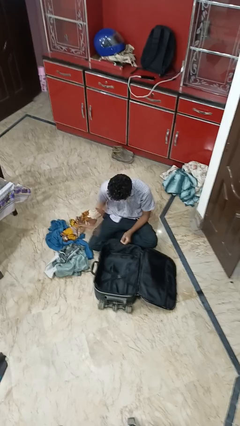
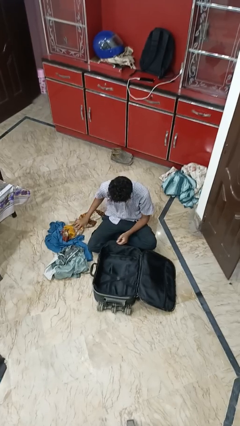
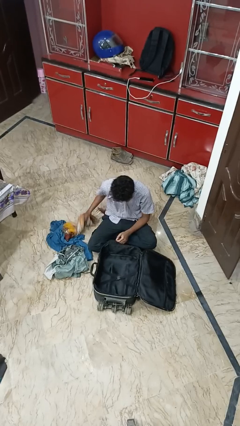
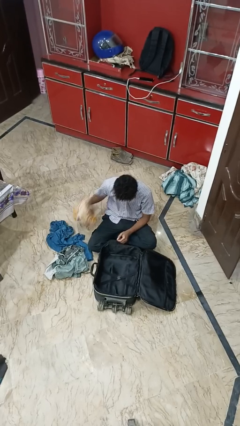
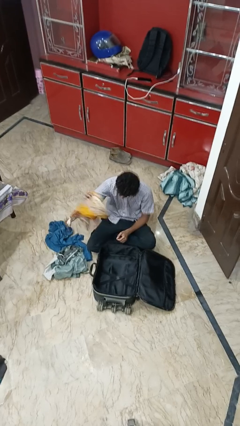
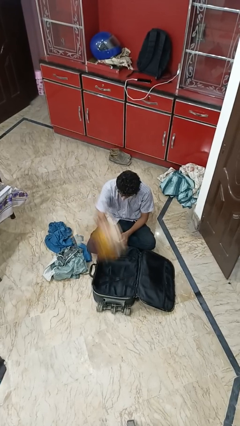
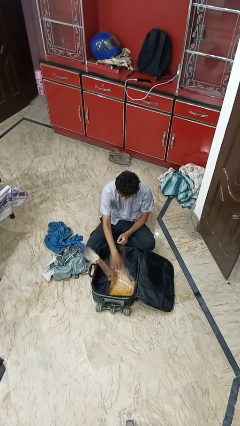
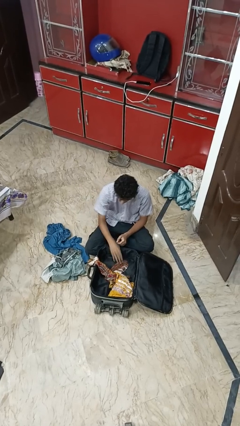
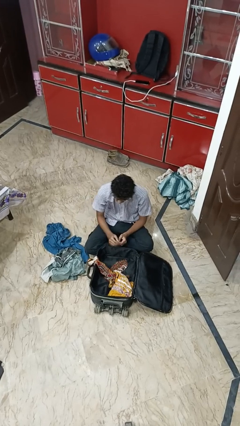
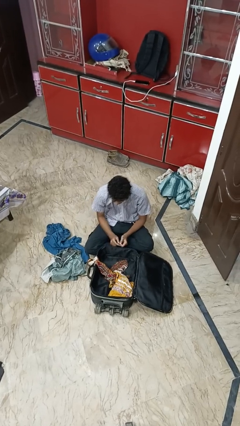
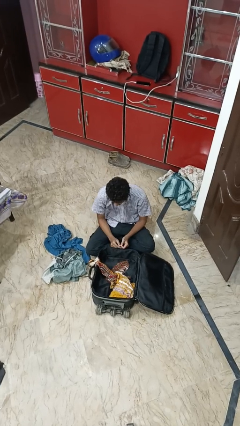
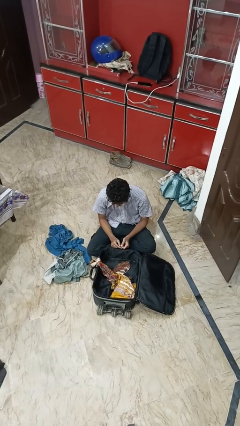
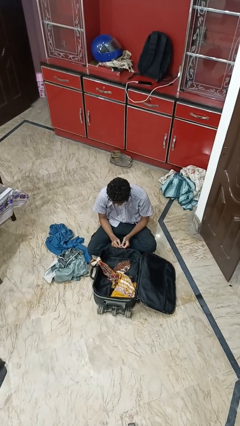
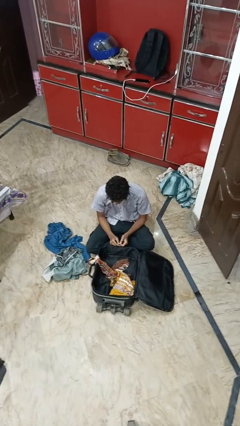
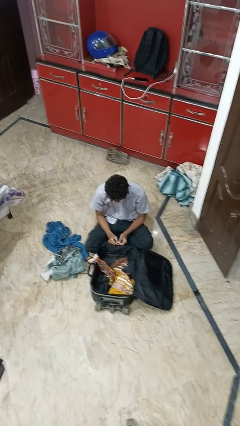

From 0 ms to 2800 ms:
person loads clothes into suitcase

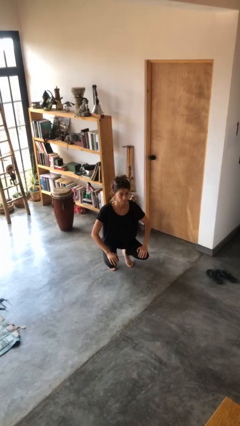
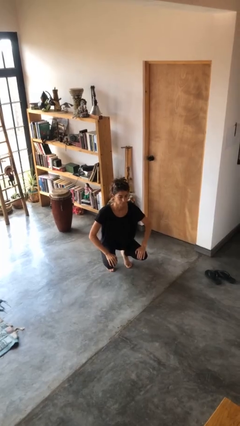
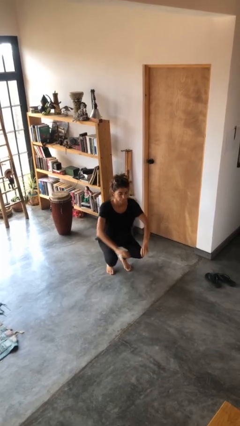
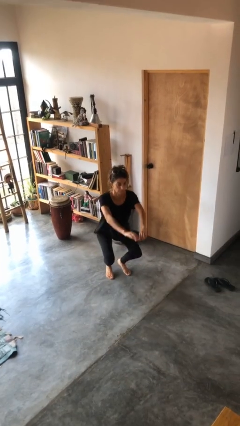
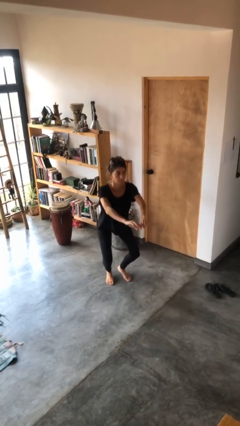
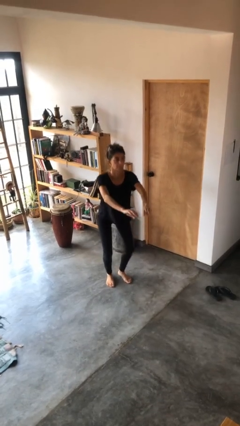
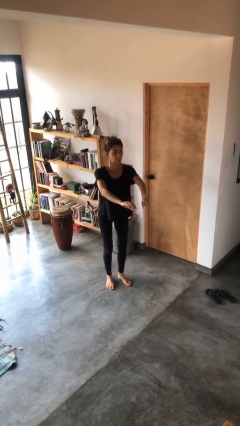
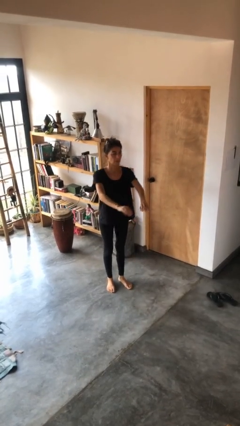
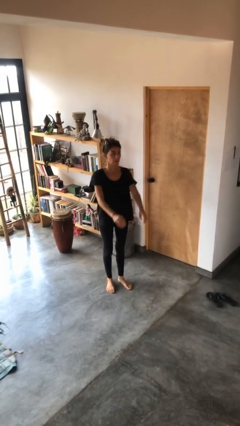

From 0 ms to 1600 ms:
person stands up

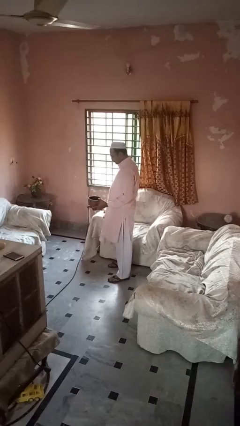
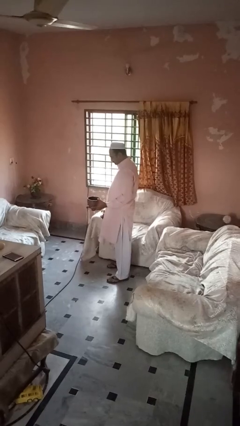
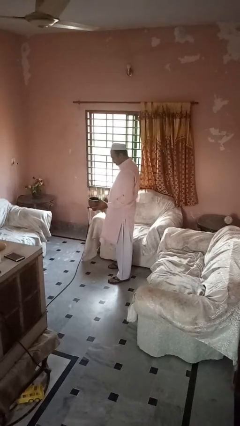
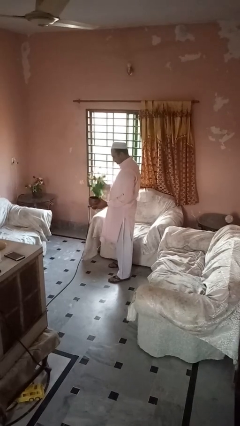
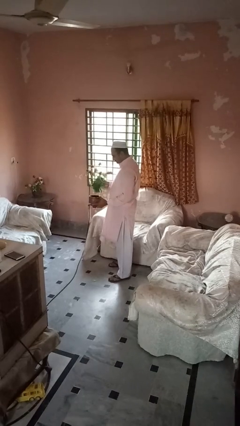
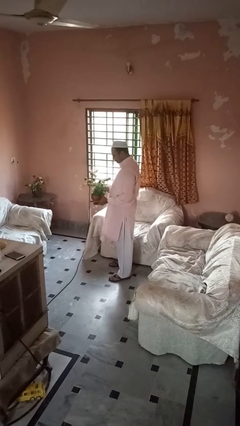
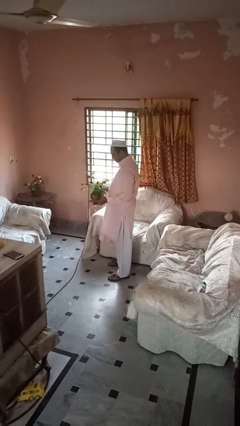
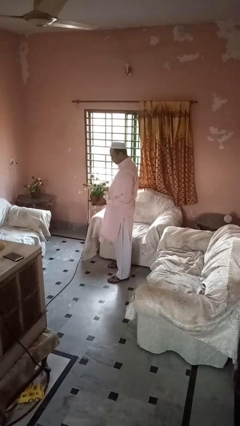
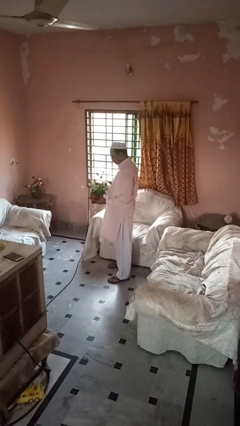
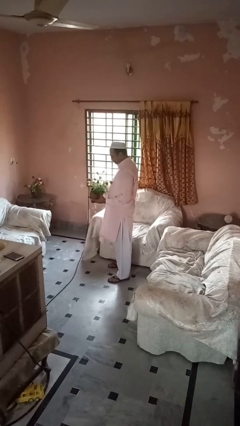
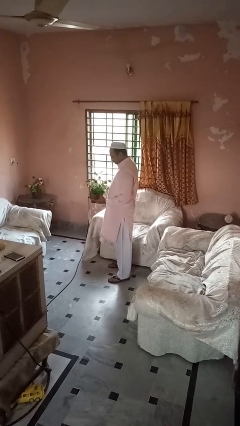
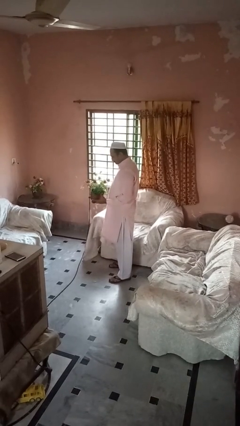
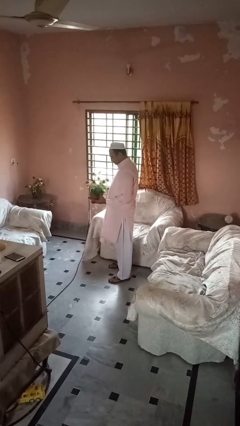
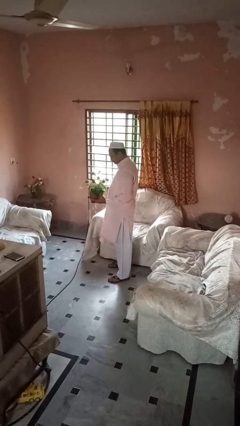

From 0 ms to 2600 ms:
person arranges flowers in vase

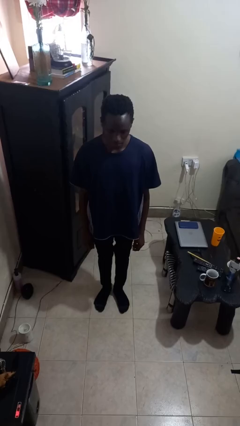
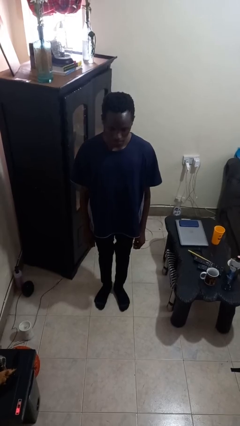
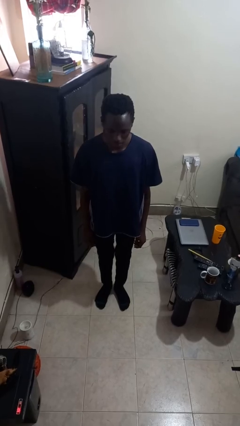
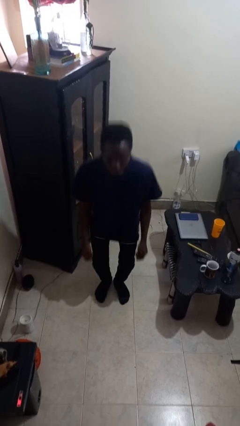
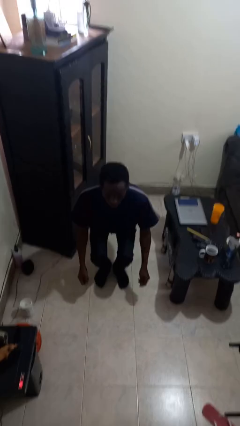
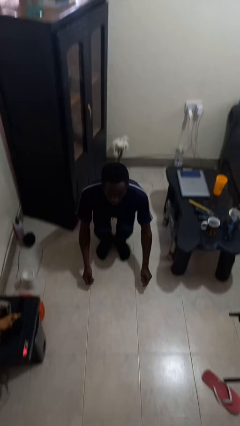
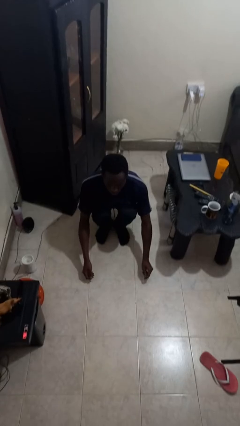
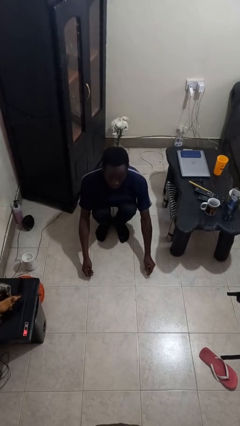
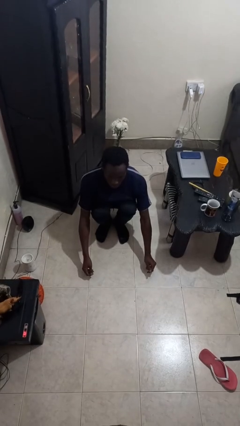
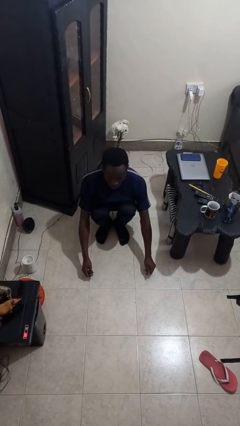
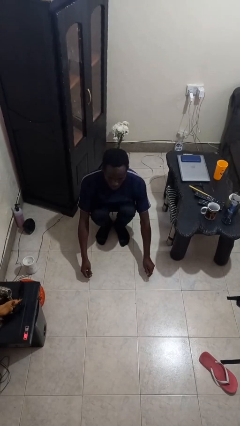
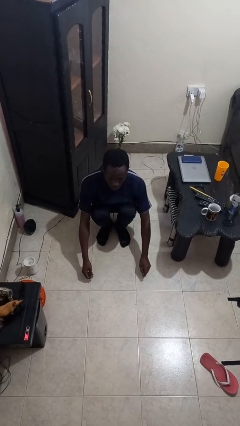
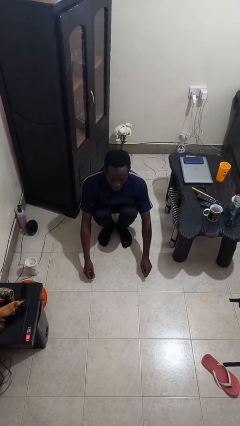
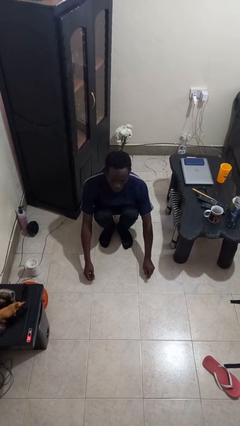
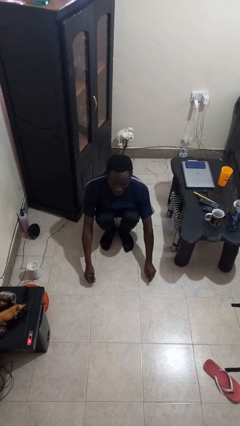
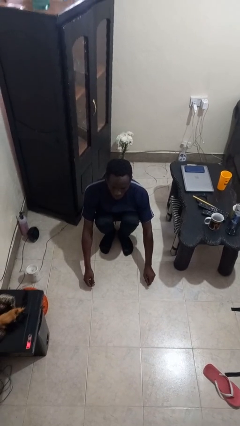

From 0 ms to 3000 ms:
person squats

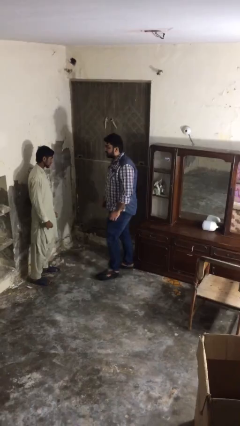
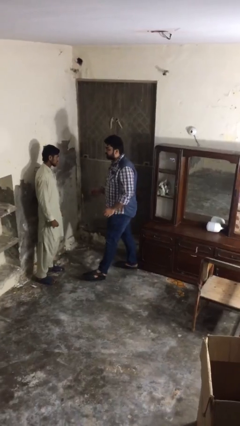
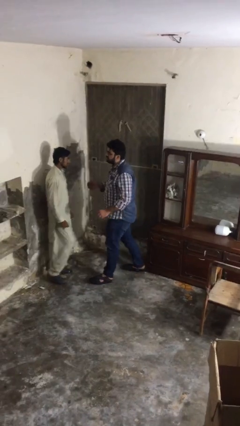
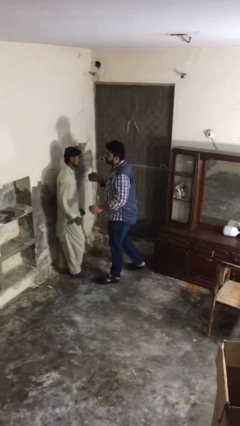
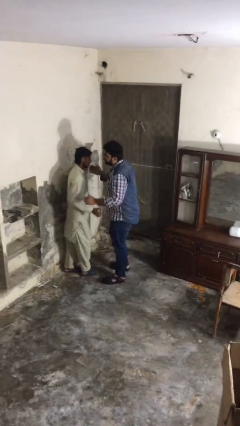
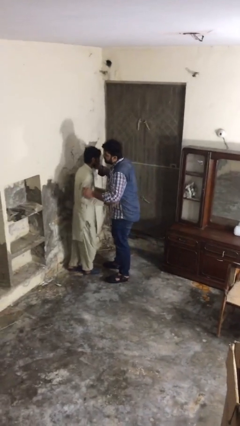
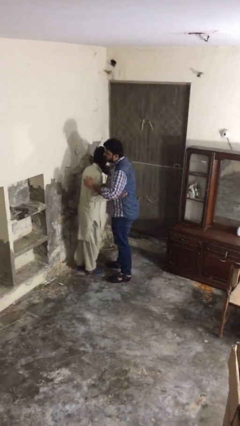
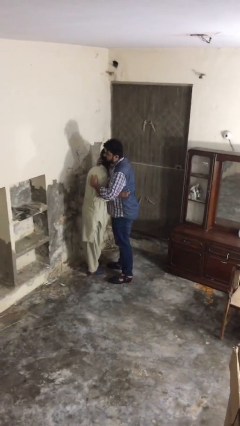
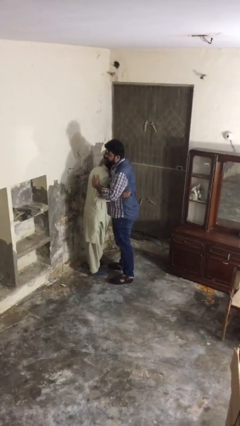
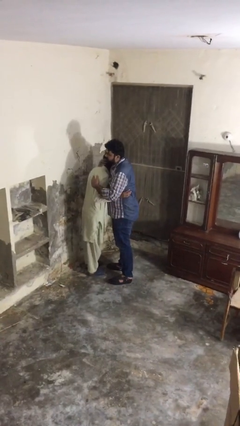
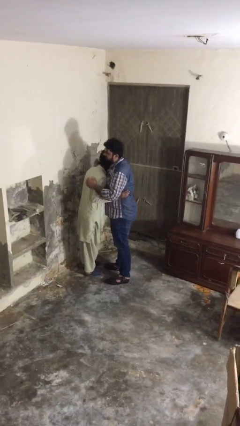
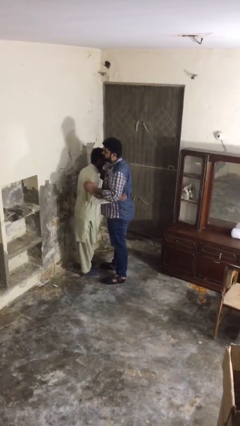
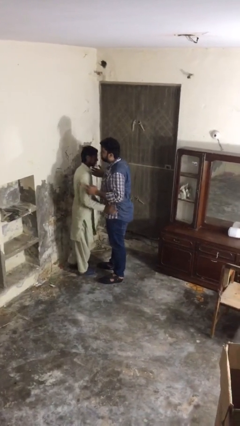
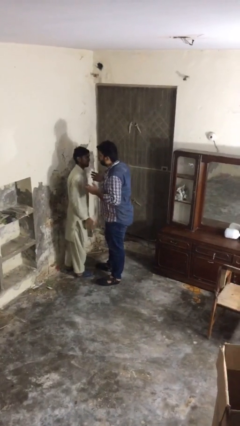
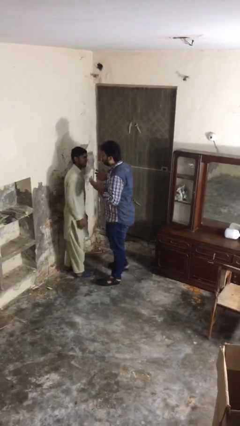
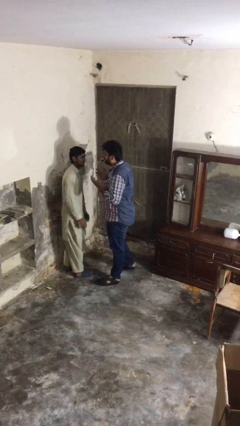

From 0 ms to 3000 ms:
person embraces person

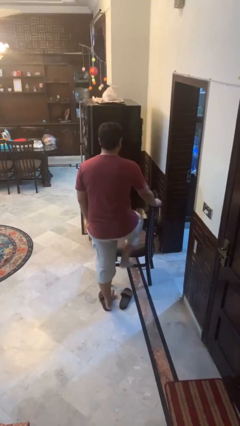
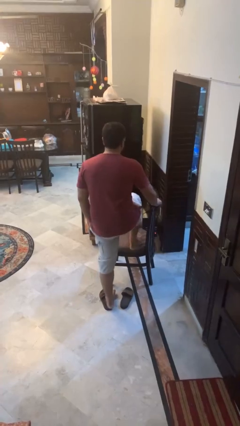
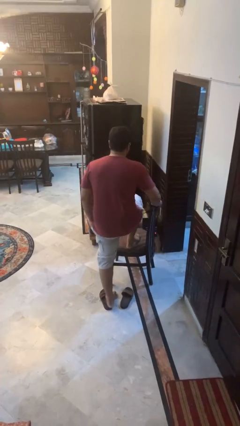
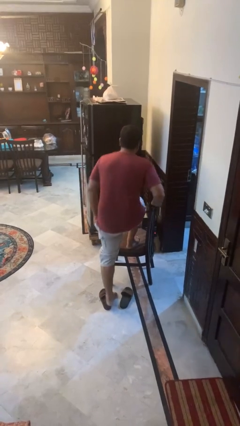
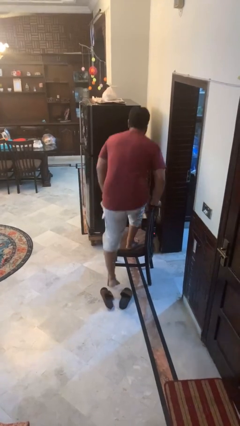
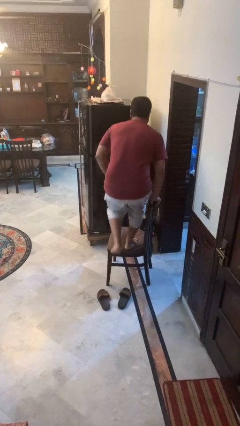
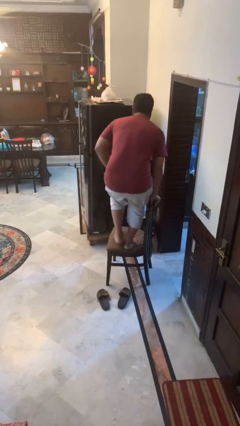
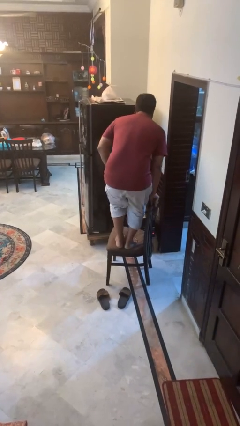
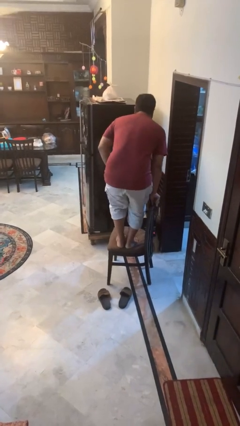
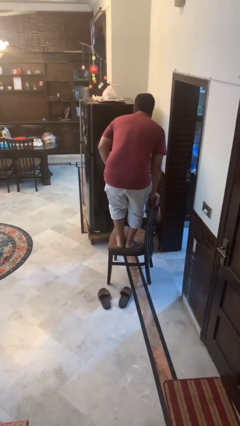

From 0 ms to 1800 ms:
person climbs on chair

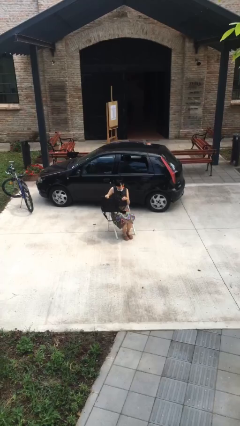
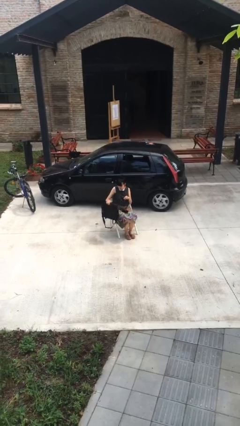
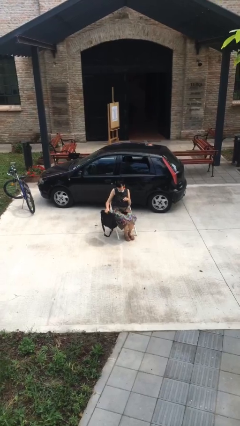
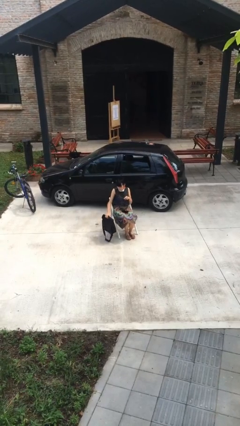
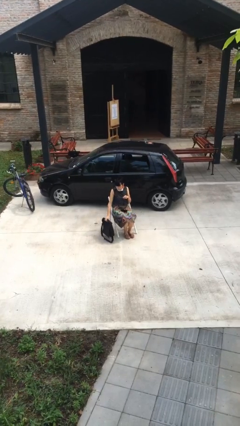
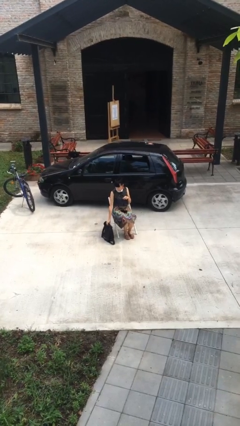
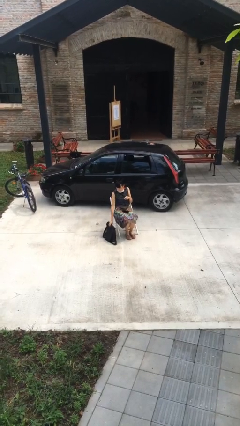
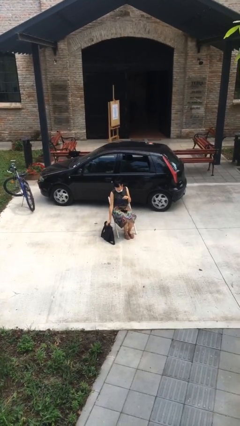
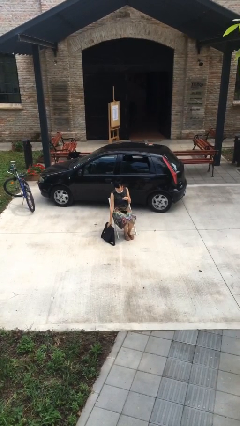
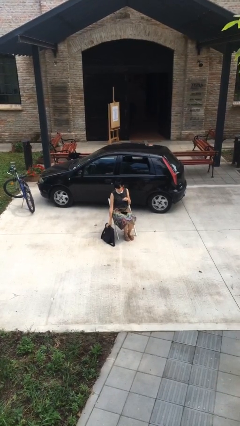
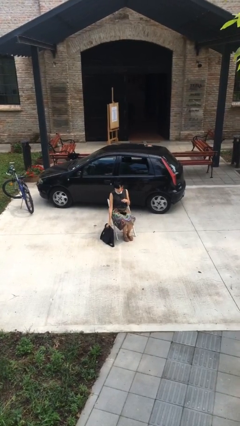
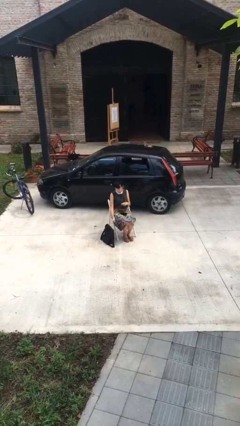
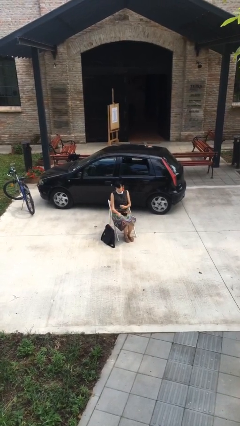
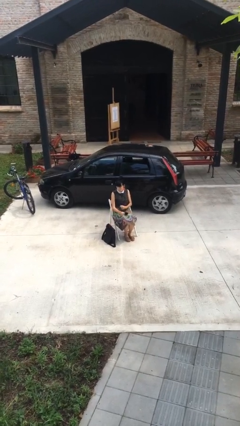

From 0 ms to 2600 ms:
person puts down object on floor
